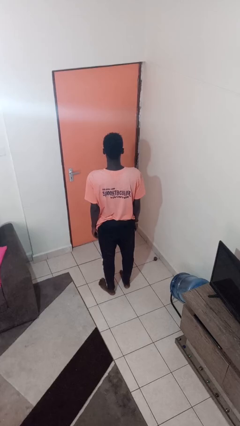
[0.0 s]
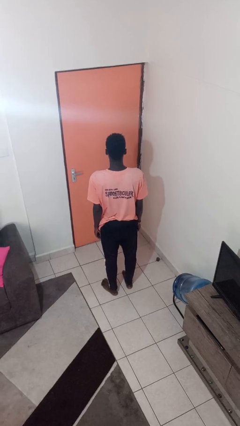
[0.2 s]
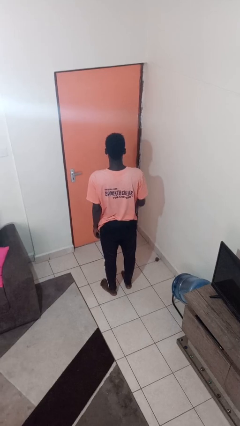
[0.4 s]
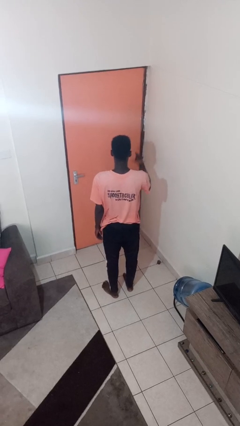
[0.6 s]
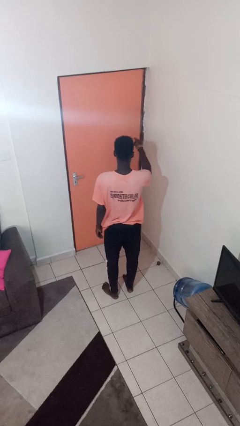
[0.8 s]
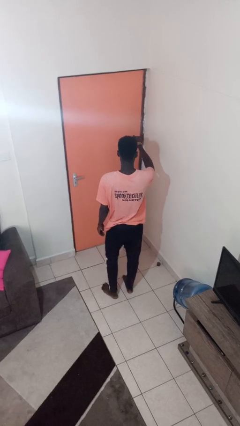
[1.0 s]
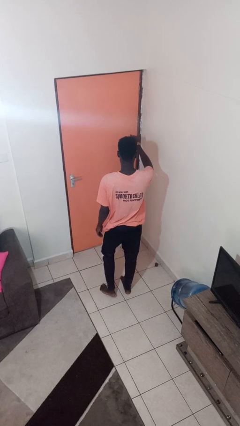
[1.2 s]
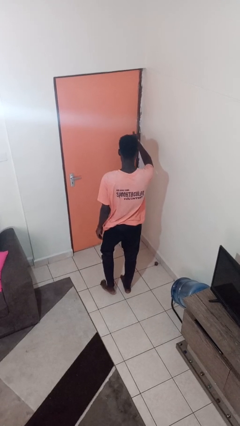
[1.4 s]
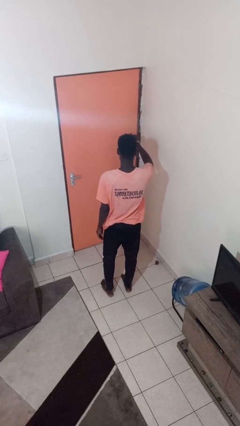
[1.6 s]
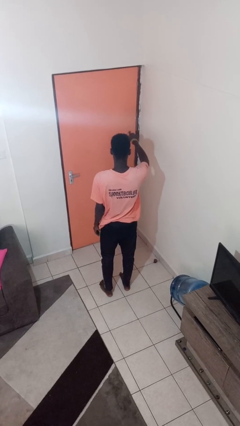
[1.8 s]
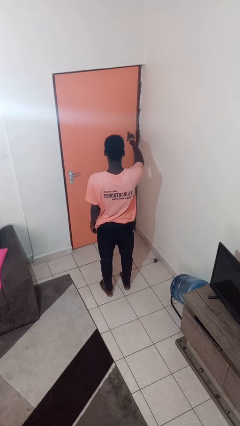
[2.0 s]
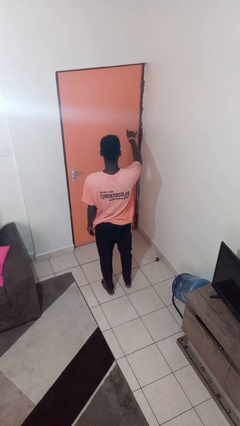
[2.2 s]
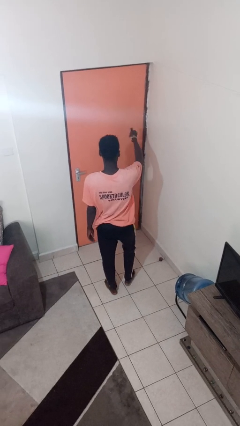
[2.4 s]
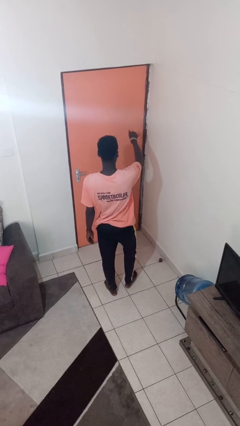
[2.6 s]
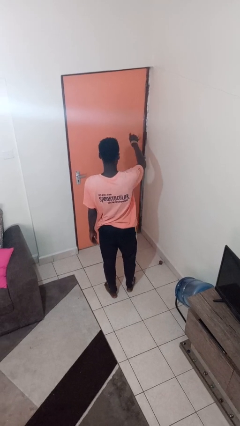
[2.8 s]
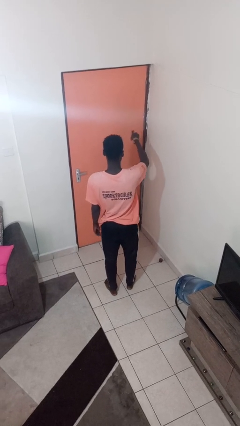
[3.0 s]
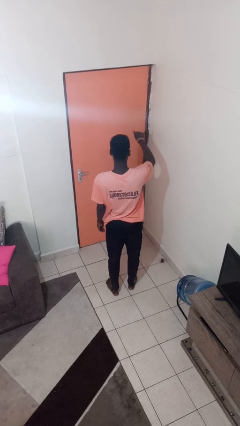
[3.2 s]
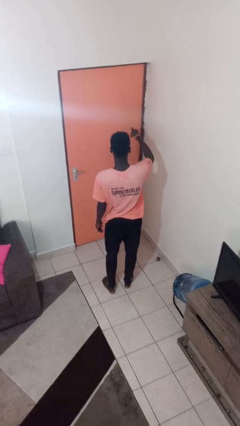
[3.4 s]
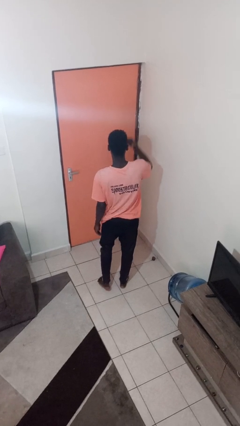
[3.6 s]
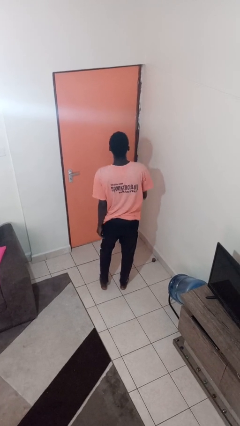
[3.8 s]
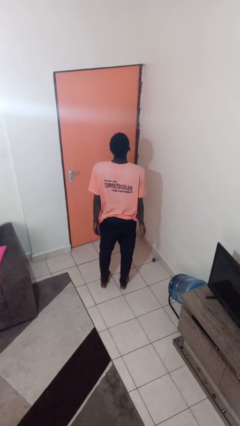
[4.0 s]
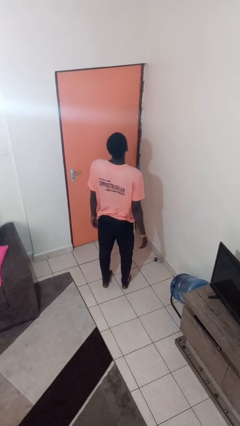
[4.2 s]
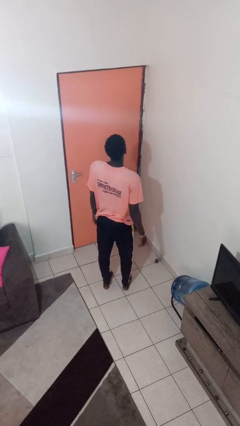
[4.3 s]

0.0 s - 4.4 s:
person gestures hang loose

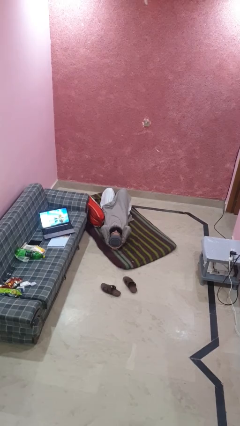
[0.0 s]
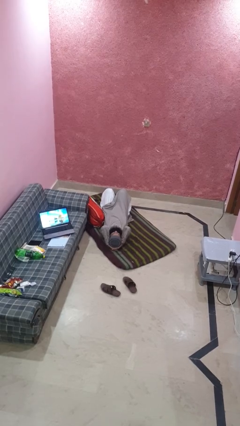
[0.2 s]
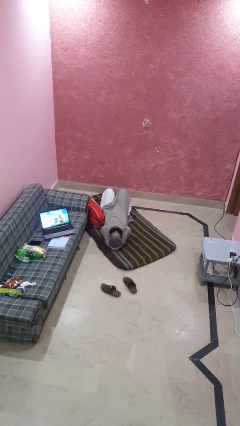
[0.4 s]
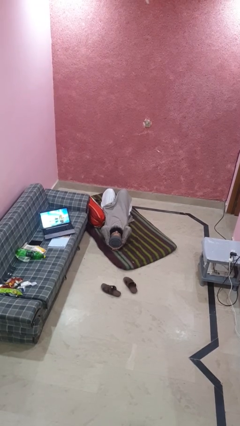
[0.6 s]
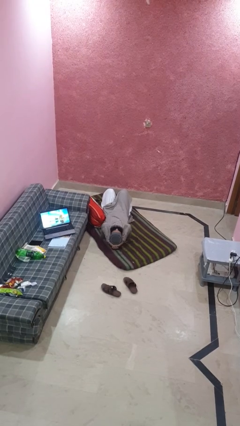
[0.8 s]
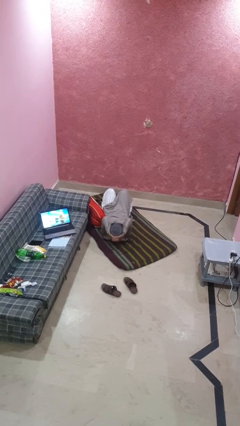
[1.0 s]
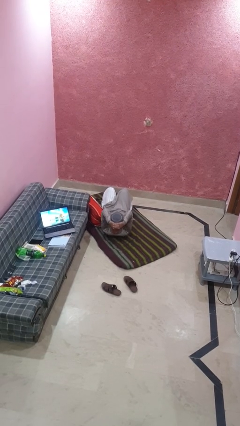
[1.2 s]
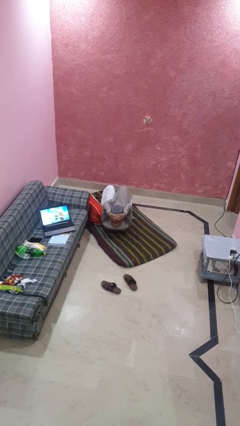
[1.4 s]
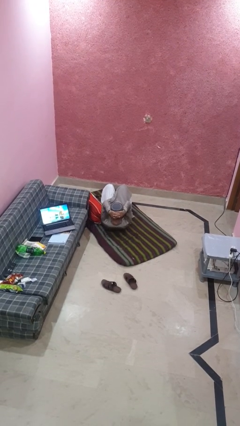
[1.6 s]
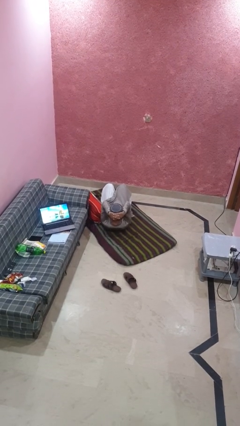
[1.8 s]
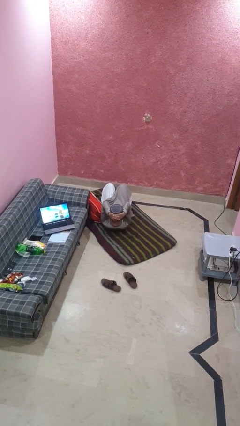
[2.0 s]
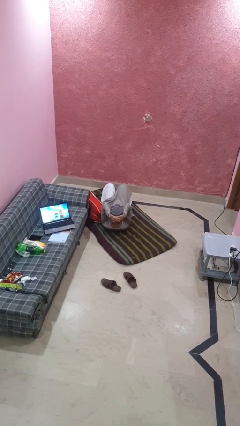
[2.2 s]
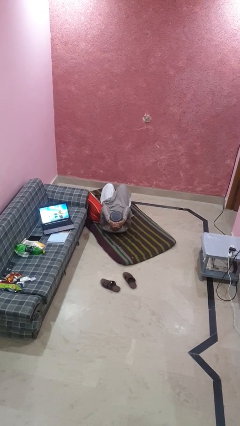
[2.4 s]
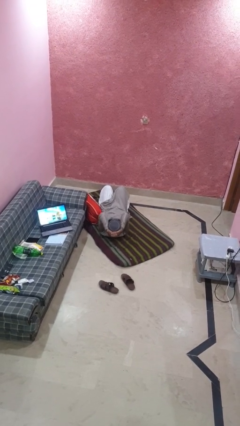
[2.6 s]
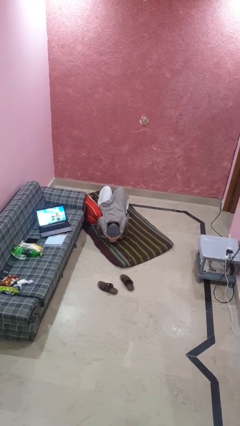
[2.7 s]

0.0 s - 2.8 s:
person exercises with situp

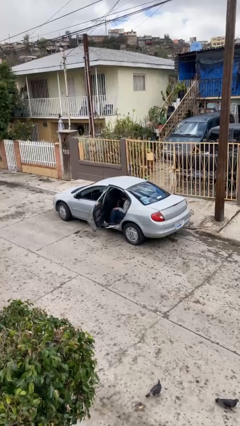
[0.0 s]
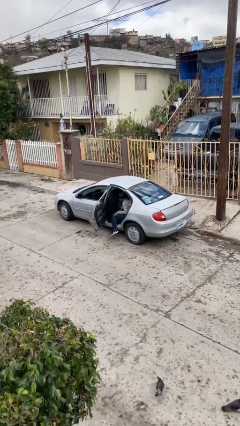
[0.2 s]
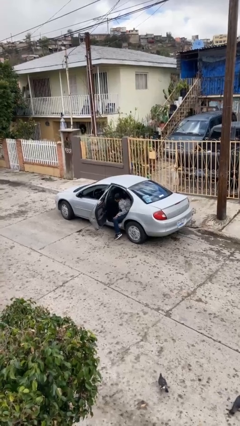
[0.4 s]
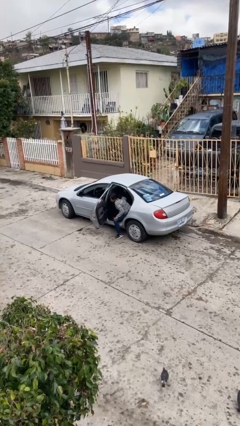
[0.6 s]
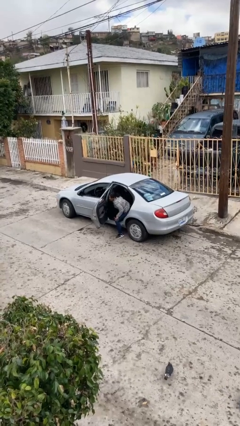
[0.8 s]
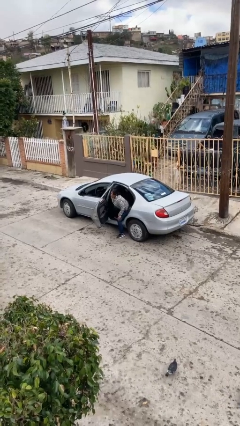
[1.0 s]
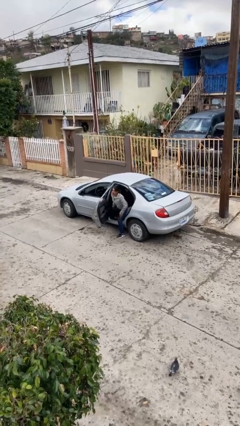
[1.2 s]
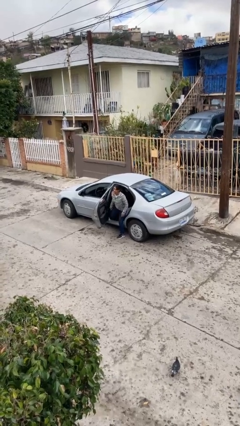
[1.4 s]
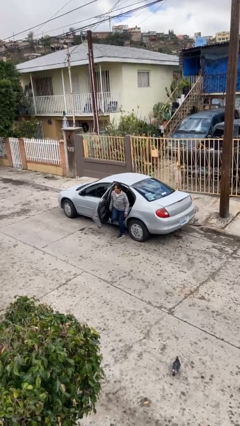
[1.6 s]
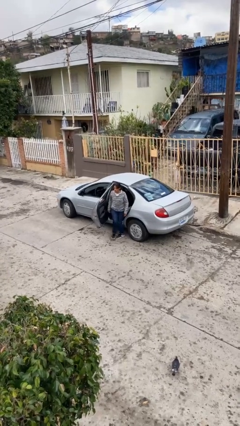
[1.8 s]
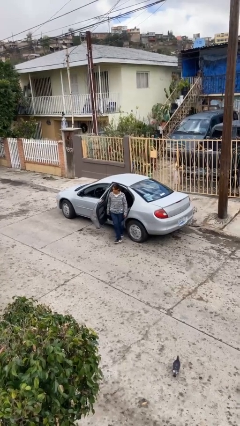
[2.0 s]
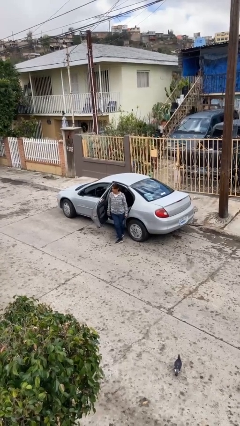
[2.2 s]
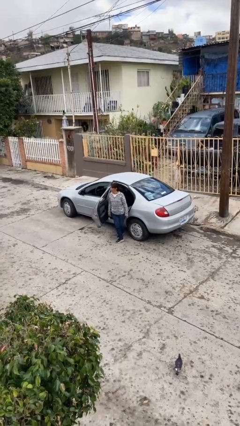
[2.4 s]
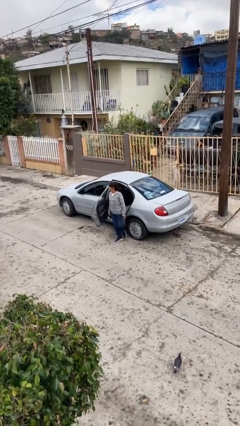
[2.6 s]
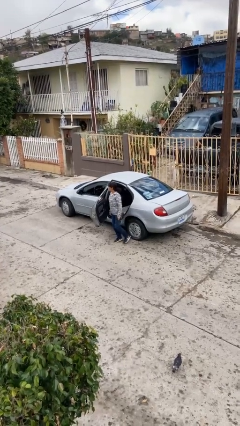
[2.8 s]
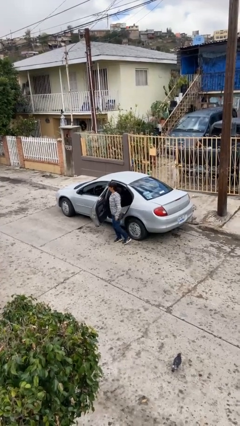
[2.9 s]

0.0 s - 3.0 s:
person exits car

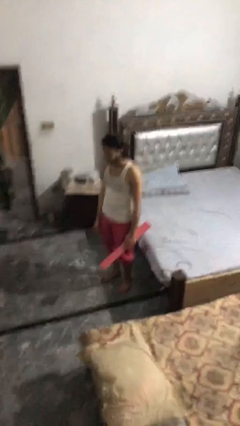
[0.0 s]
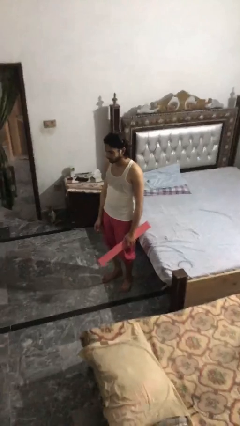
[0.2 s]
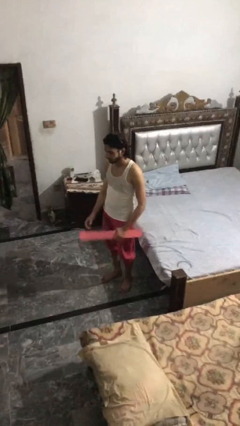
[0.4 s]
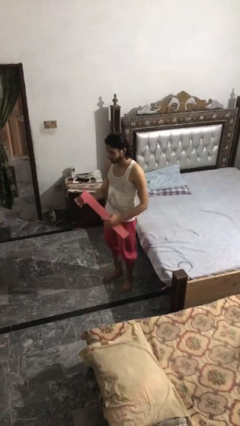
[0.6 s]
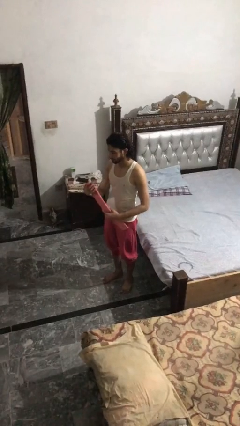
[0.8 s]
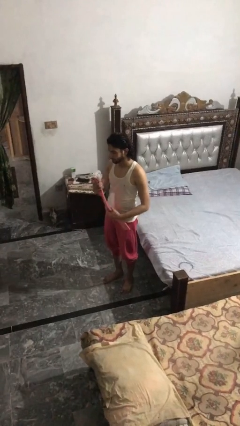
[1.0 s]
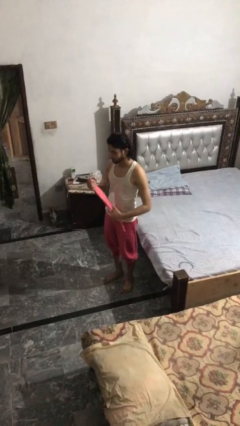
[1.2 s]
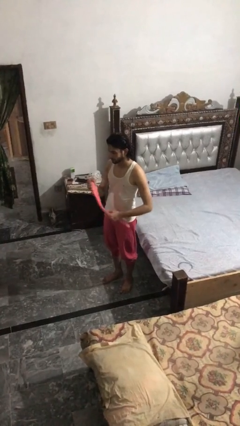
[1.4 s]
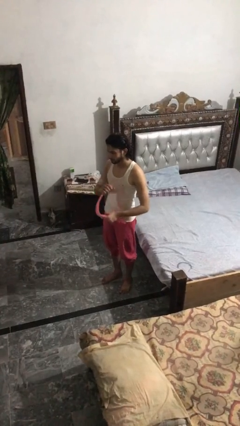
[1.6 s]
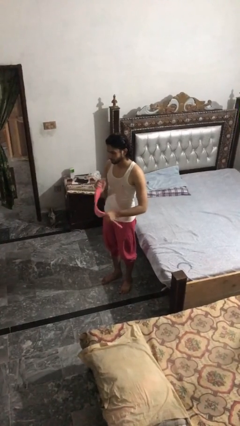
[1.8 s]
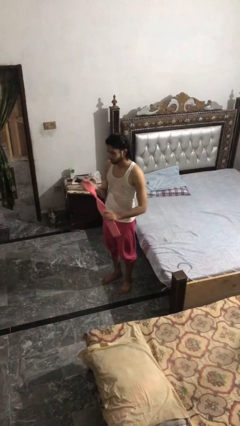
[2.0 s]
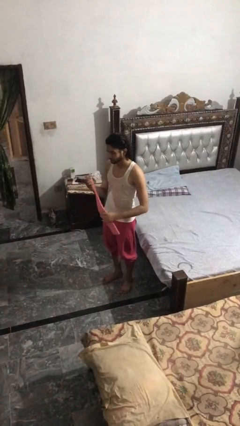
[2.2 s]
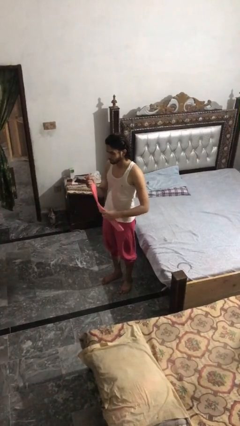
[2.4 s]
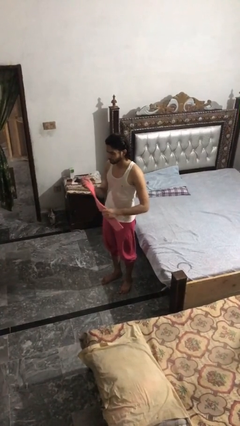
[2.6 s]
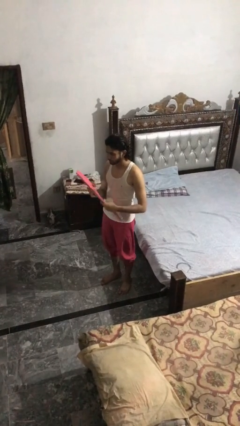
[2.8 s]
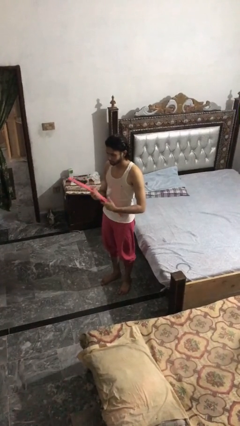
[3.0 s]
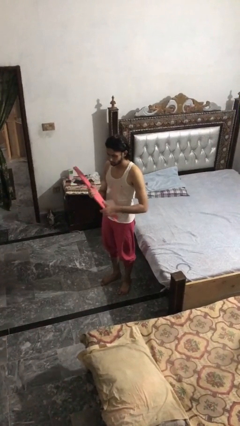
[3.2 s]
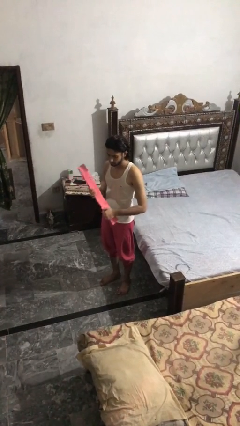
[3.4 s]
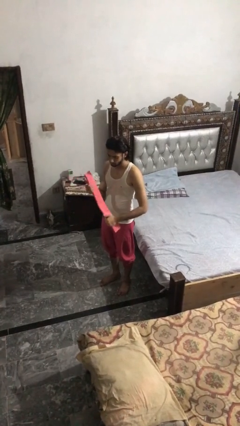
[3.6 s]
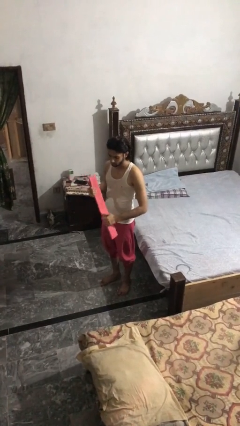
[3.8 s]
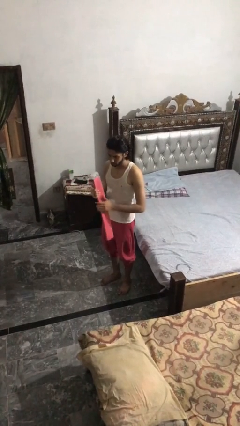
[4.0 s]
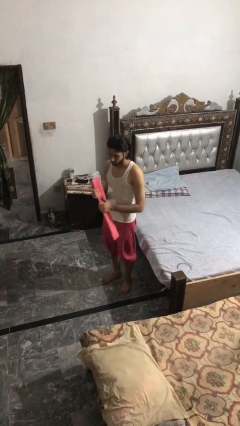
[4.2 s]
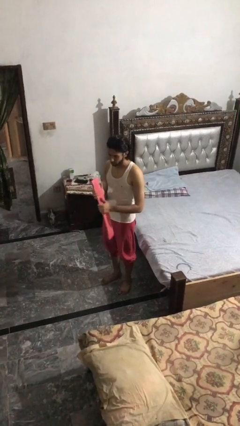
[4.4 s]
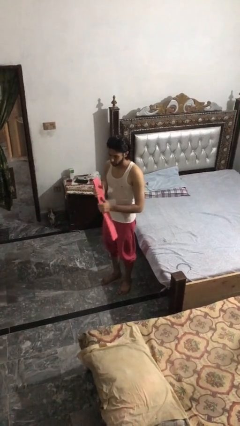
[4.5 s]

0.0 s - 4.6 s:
person squeezes object

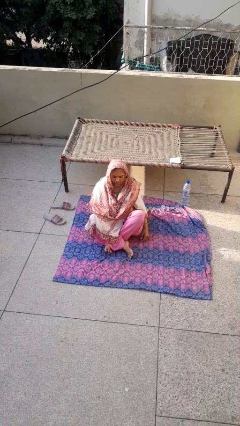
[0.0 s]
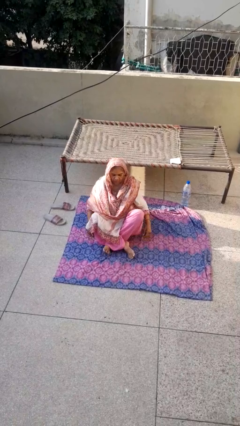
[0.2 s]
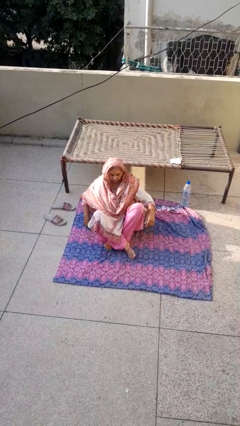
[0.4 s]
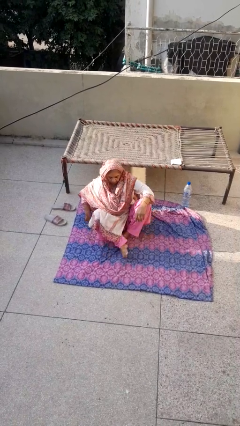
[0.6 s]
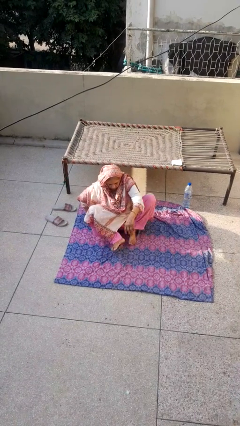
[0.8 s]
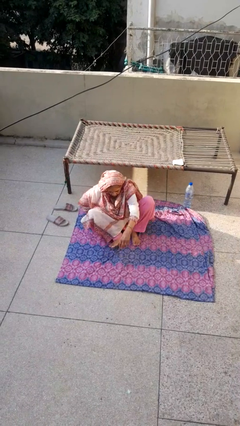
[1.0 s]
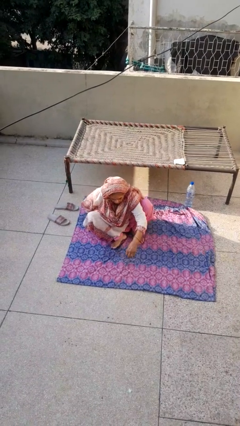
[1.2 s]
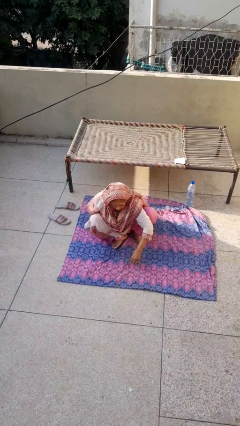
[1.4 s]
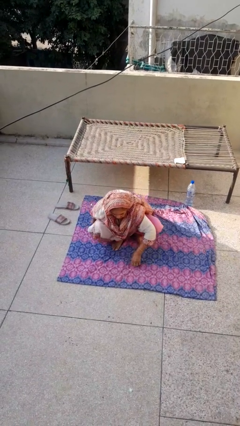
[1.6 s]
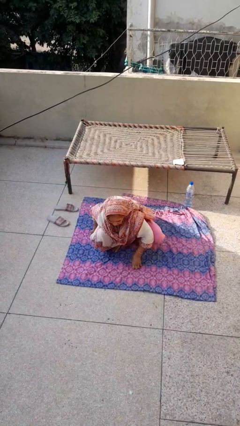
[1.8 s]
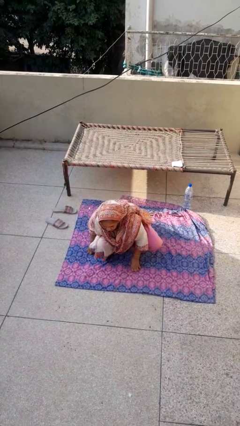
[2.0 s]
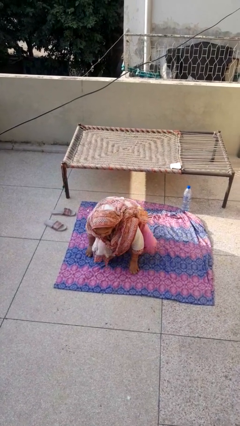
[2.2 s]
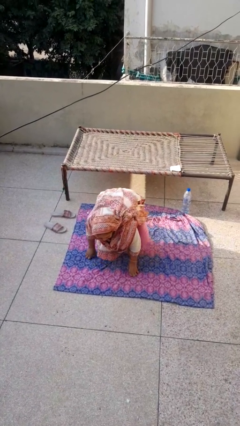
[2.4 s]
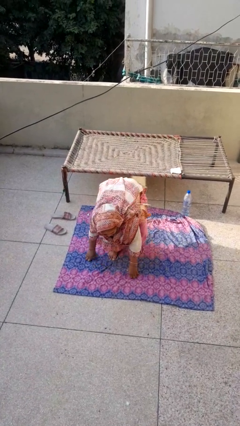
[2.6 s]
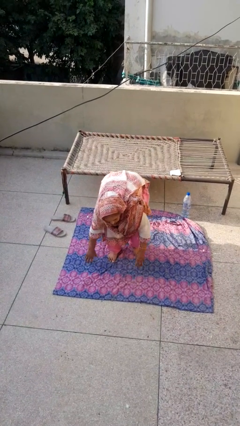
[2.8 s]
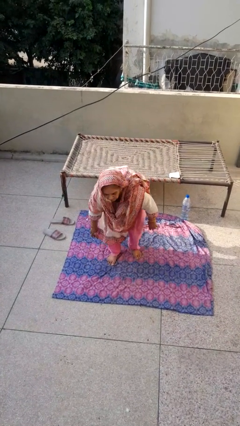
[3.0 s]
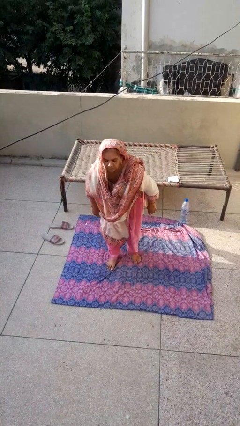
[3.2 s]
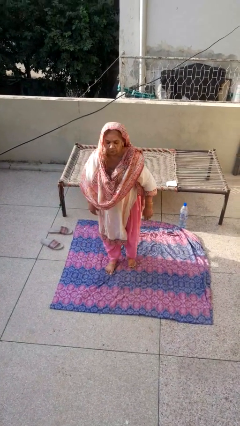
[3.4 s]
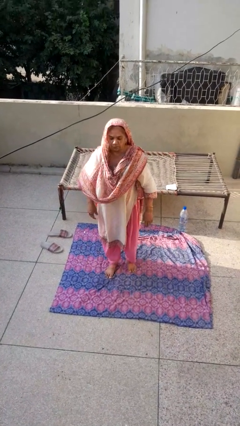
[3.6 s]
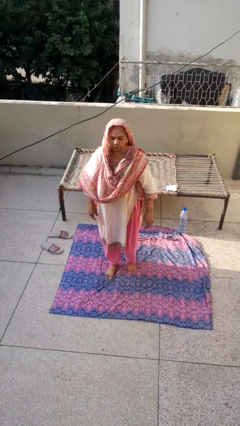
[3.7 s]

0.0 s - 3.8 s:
person stands up from floor
